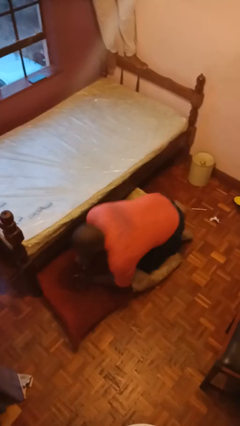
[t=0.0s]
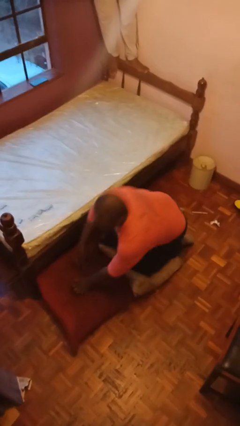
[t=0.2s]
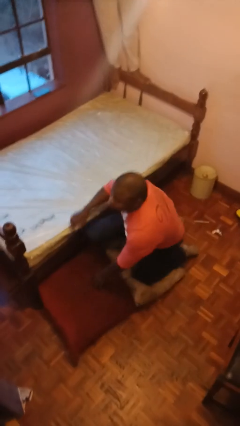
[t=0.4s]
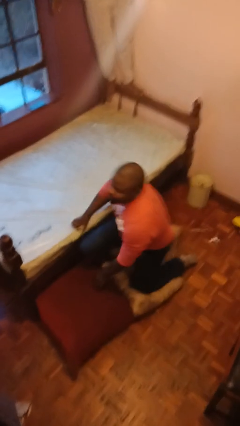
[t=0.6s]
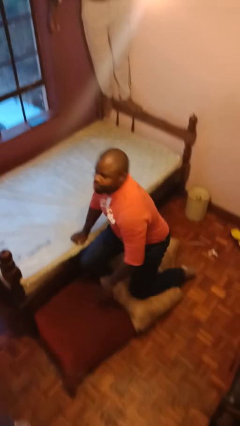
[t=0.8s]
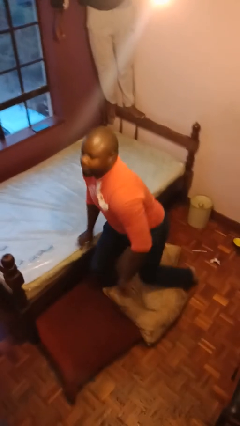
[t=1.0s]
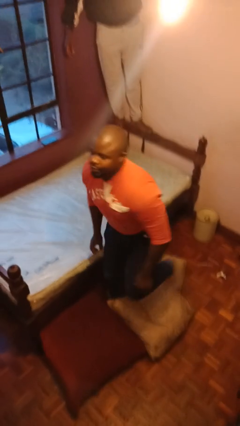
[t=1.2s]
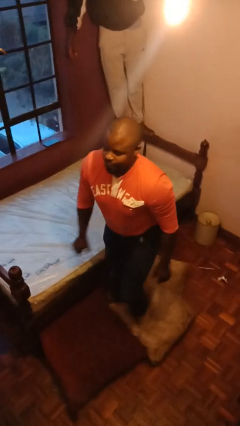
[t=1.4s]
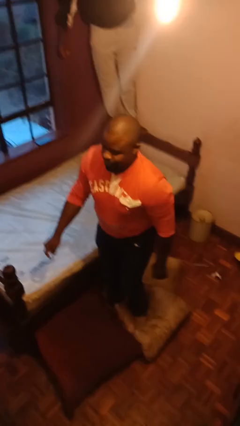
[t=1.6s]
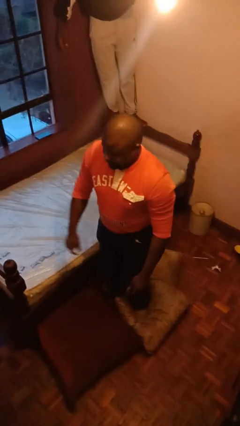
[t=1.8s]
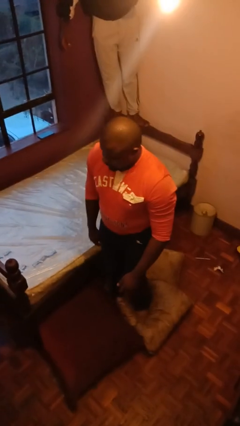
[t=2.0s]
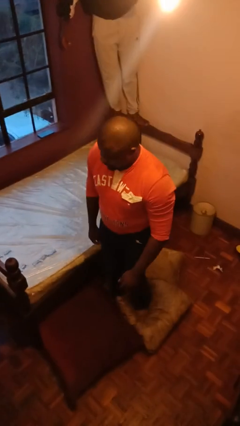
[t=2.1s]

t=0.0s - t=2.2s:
person stands up from floor

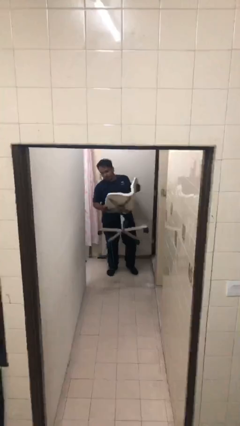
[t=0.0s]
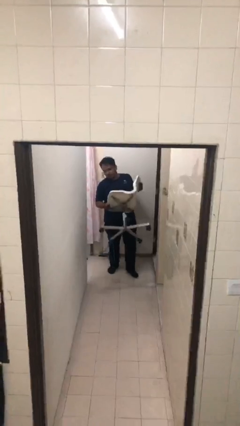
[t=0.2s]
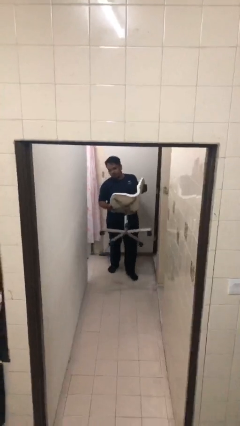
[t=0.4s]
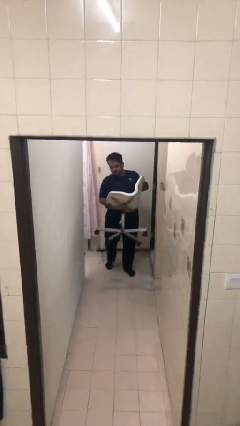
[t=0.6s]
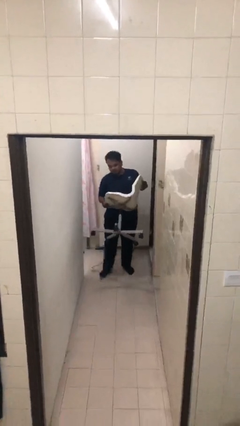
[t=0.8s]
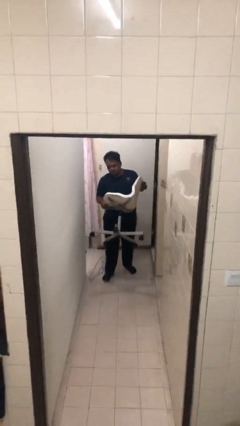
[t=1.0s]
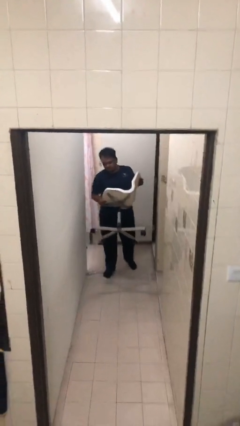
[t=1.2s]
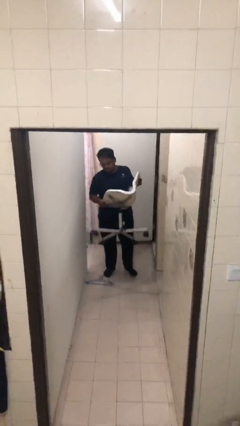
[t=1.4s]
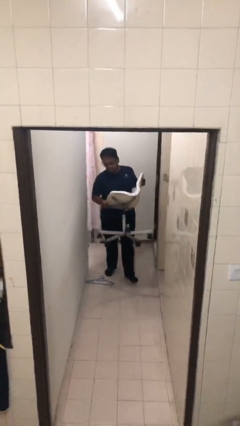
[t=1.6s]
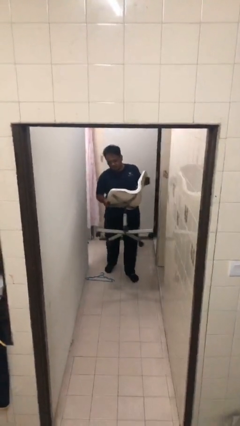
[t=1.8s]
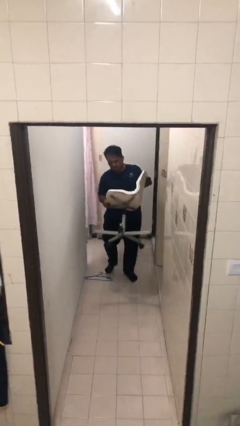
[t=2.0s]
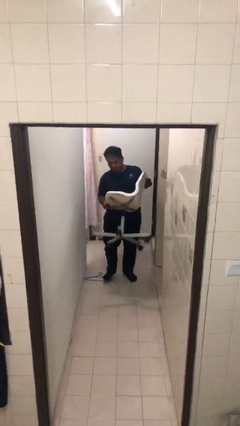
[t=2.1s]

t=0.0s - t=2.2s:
person carries heavy object

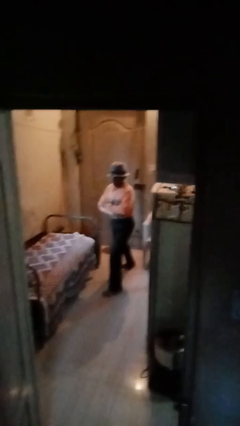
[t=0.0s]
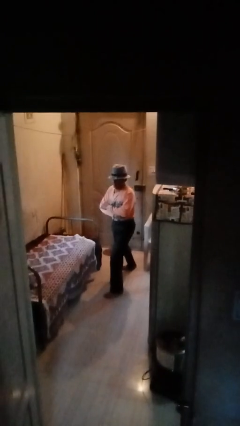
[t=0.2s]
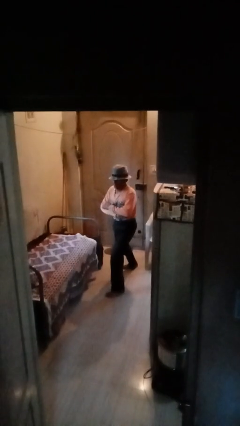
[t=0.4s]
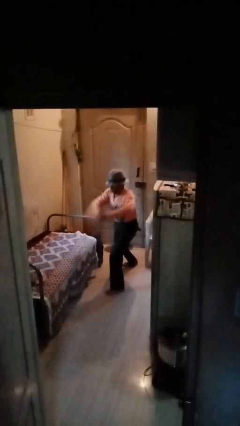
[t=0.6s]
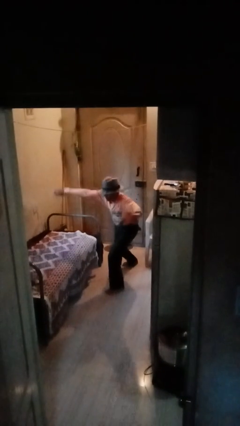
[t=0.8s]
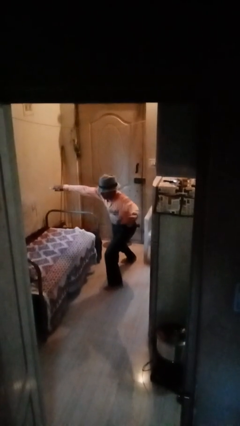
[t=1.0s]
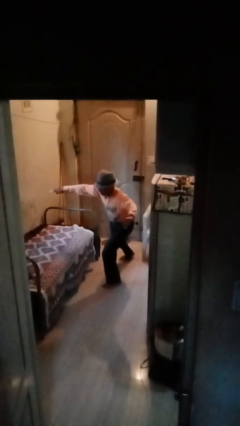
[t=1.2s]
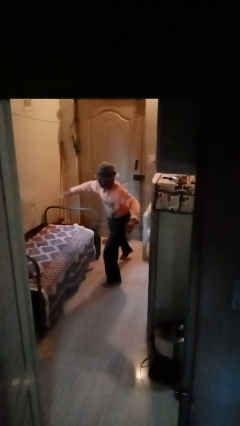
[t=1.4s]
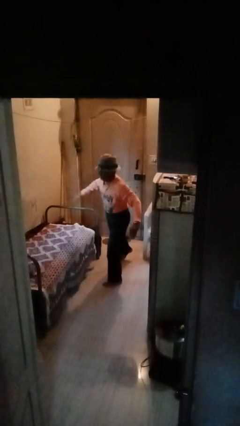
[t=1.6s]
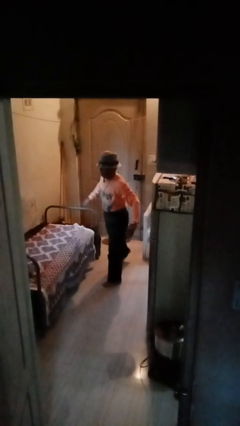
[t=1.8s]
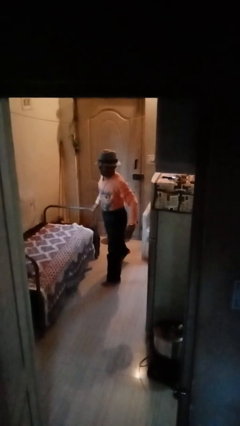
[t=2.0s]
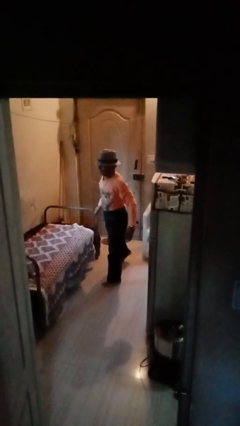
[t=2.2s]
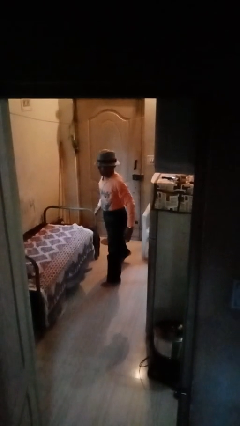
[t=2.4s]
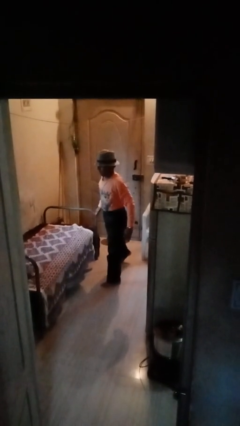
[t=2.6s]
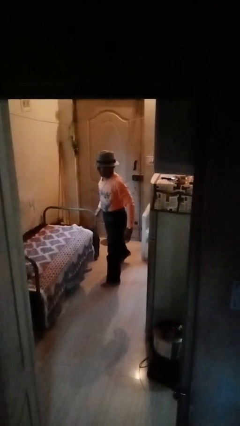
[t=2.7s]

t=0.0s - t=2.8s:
person karate chop

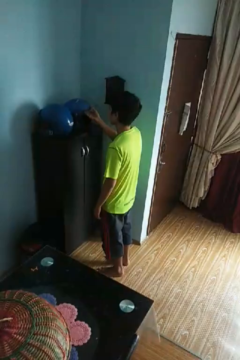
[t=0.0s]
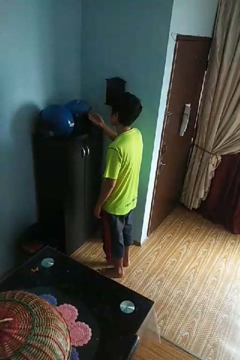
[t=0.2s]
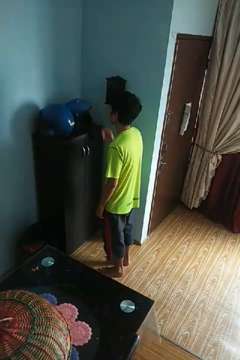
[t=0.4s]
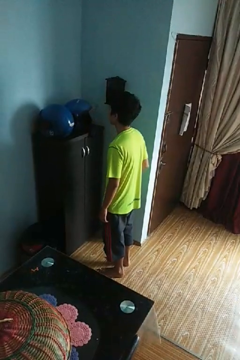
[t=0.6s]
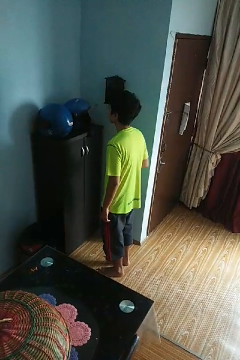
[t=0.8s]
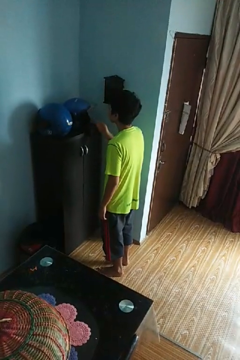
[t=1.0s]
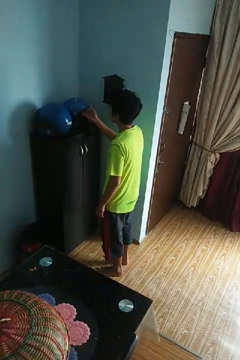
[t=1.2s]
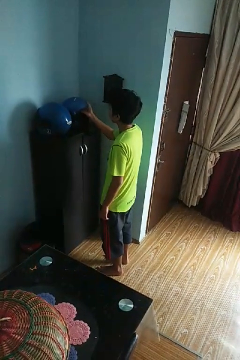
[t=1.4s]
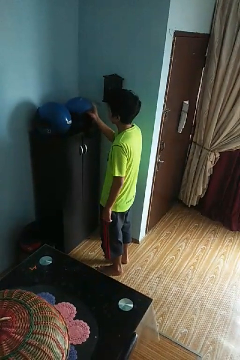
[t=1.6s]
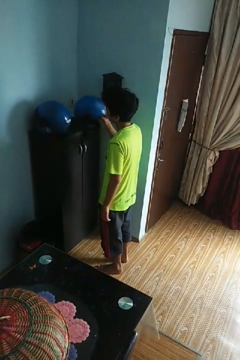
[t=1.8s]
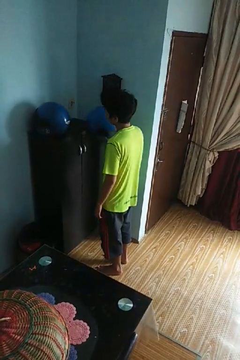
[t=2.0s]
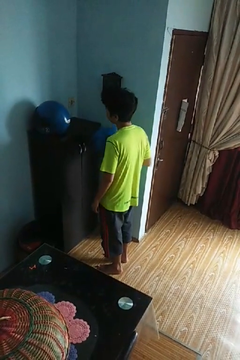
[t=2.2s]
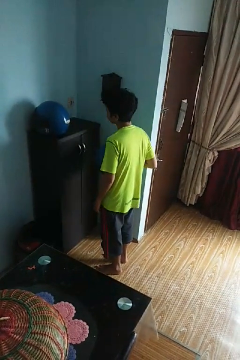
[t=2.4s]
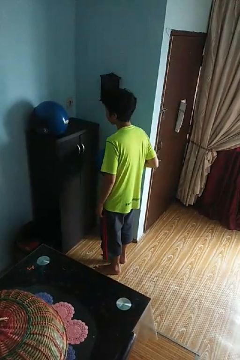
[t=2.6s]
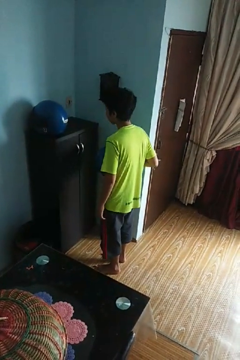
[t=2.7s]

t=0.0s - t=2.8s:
person picks up object from countertop

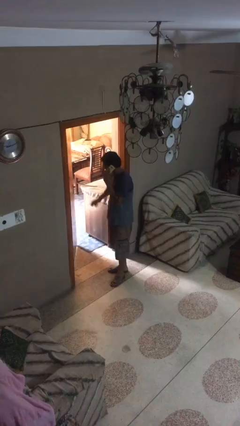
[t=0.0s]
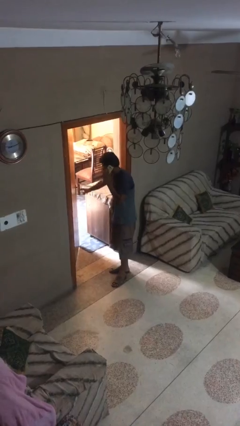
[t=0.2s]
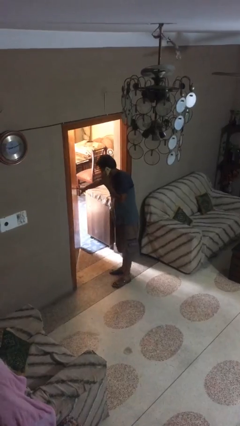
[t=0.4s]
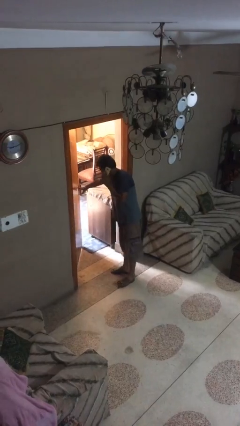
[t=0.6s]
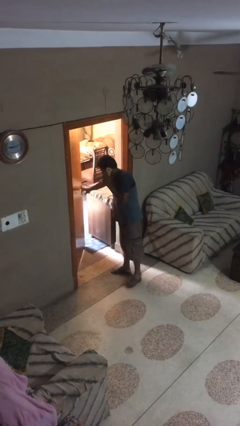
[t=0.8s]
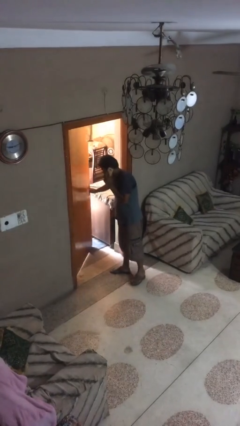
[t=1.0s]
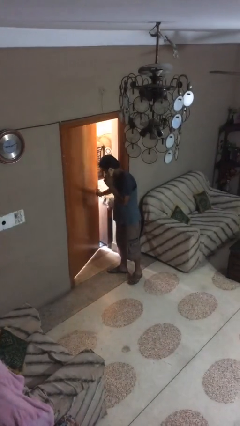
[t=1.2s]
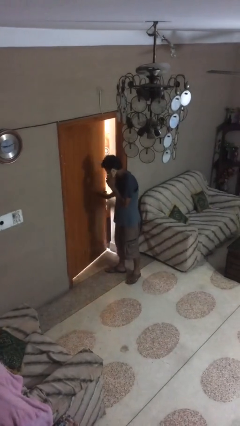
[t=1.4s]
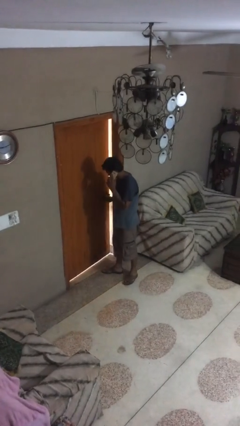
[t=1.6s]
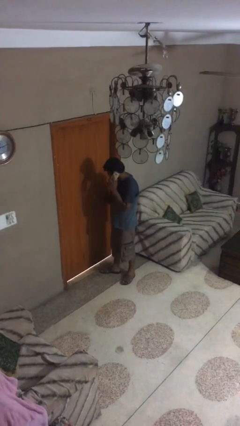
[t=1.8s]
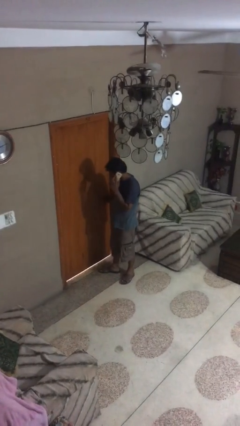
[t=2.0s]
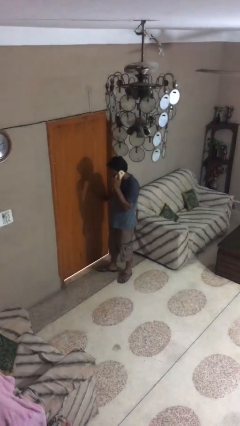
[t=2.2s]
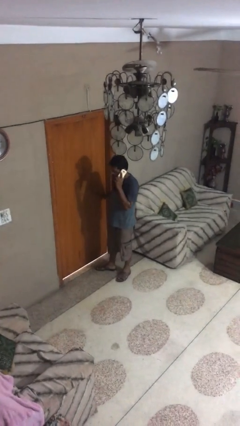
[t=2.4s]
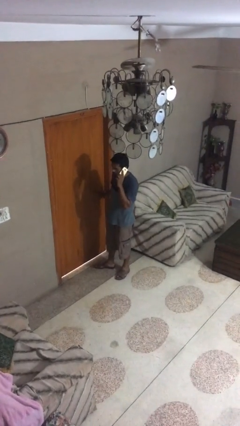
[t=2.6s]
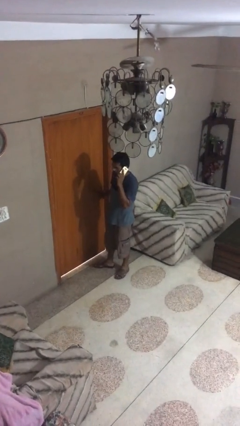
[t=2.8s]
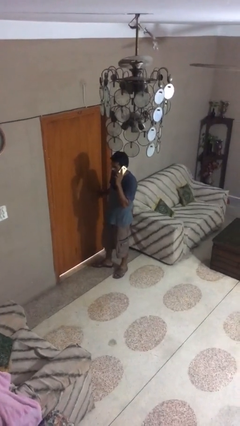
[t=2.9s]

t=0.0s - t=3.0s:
person closes facility door

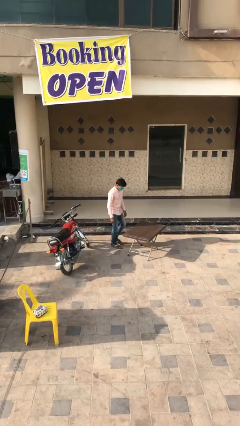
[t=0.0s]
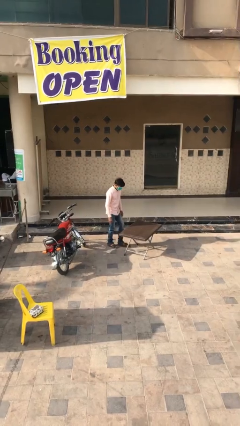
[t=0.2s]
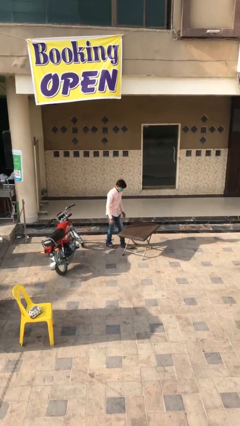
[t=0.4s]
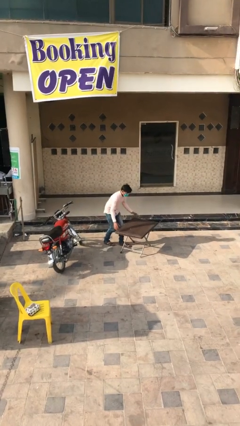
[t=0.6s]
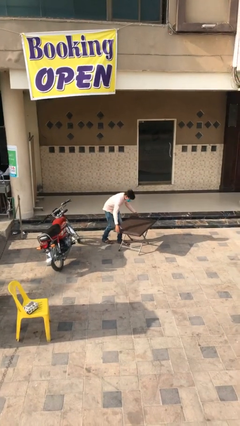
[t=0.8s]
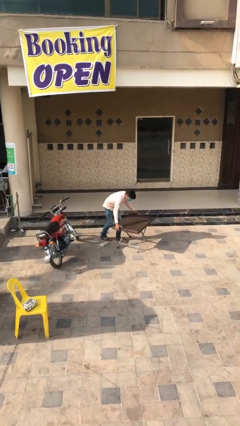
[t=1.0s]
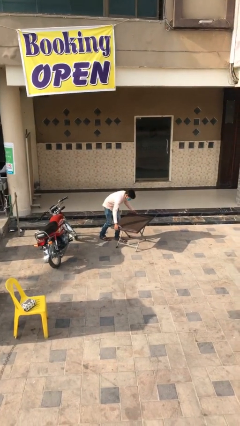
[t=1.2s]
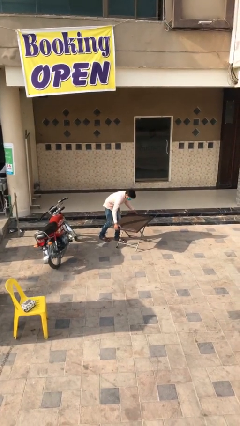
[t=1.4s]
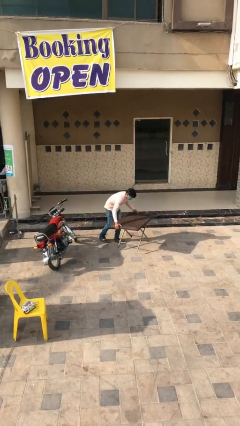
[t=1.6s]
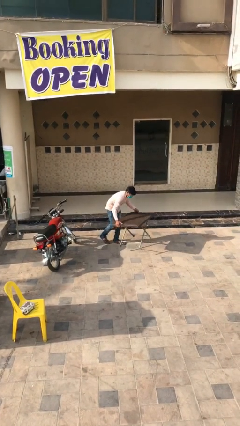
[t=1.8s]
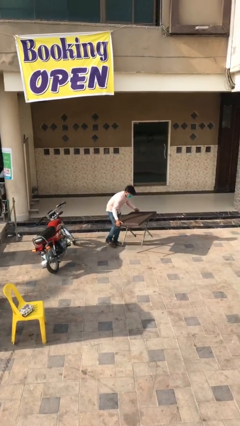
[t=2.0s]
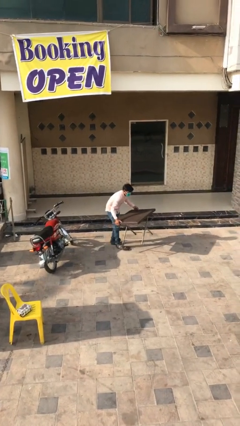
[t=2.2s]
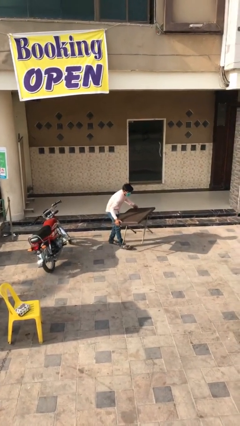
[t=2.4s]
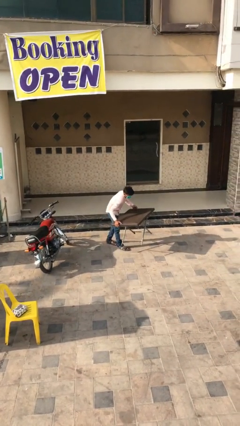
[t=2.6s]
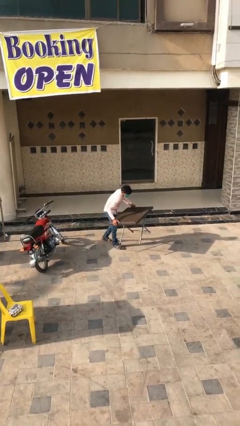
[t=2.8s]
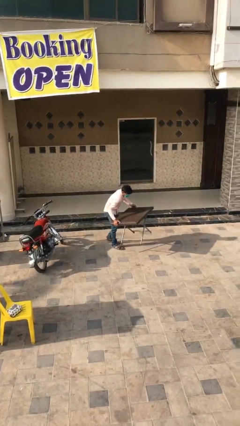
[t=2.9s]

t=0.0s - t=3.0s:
person picks up object from floor

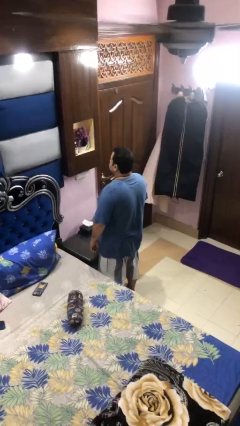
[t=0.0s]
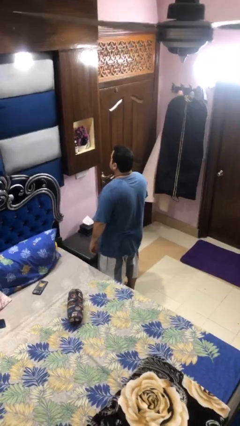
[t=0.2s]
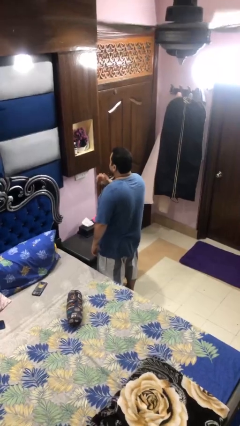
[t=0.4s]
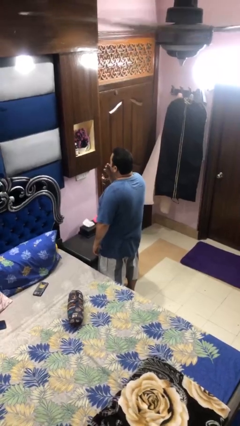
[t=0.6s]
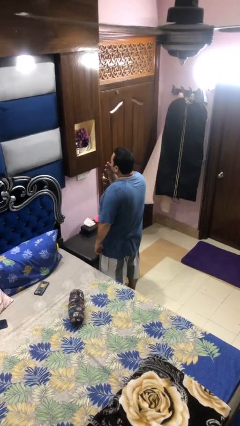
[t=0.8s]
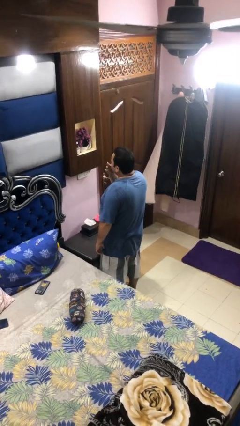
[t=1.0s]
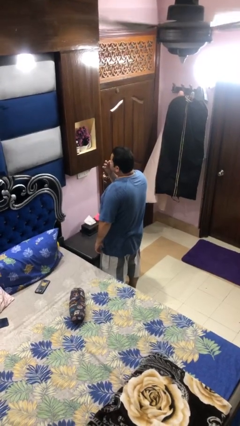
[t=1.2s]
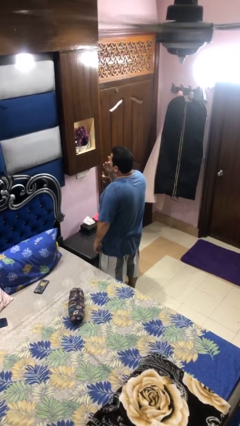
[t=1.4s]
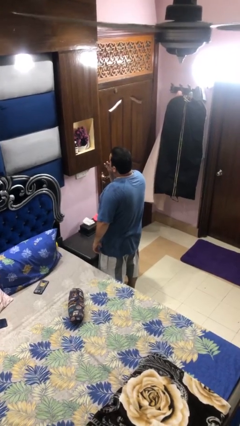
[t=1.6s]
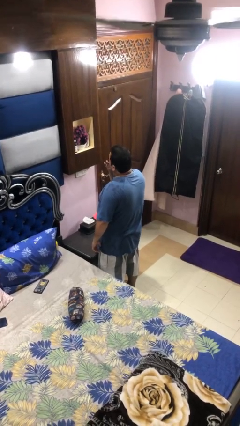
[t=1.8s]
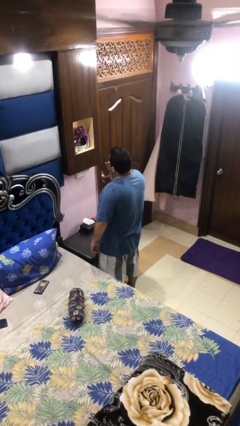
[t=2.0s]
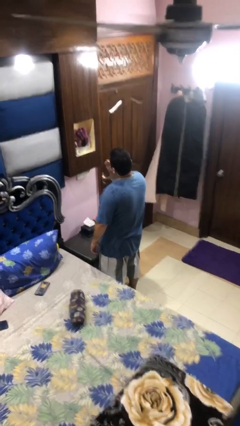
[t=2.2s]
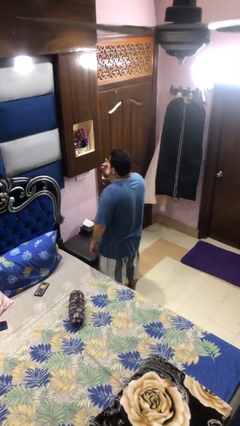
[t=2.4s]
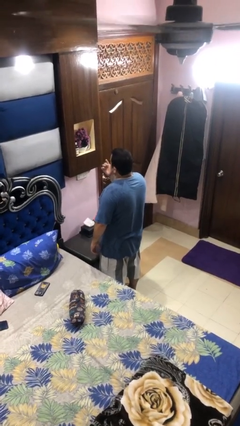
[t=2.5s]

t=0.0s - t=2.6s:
person licks fingers
